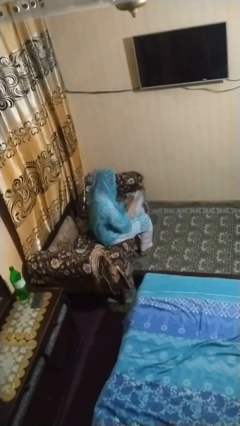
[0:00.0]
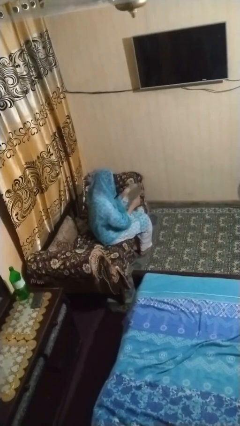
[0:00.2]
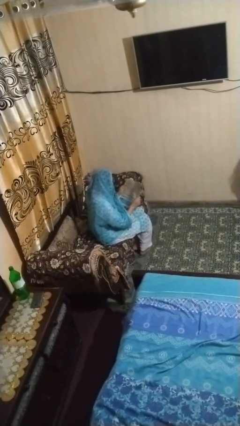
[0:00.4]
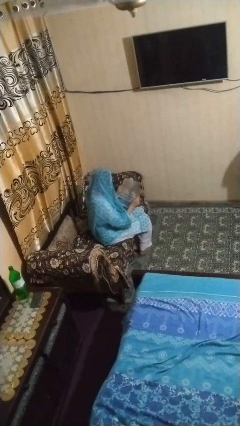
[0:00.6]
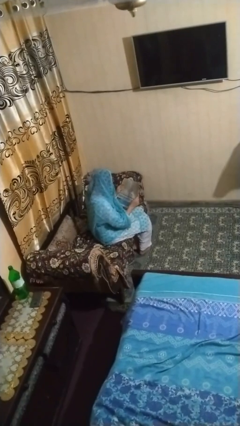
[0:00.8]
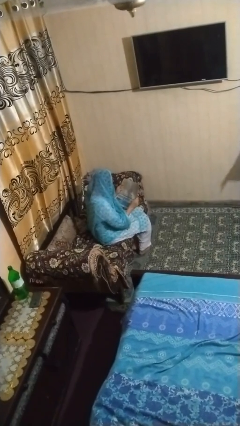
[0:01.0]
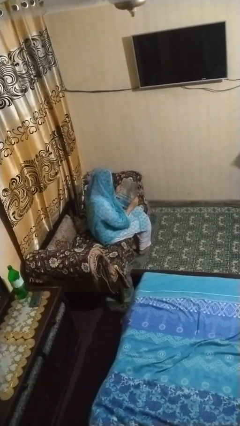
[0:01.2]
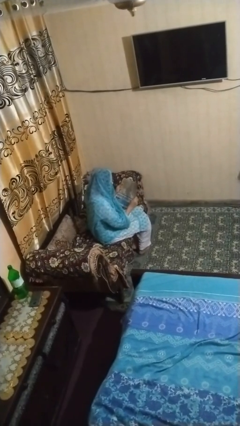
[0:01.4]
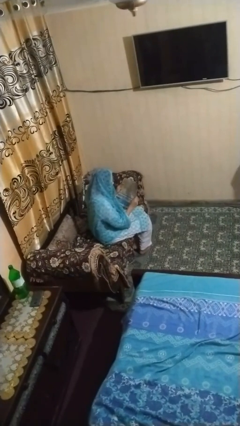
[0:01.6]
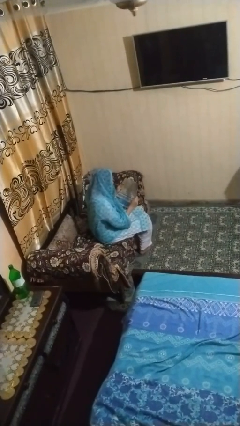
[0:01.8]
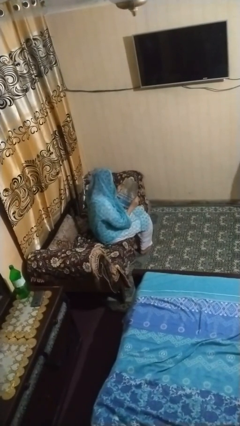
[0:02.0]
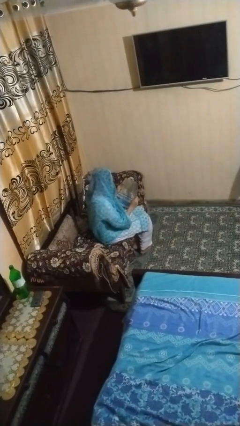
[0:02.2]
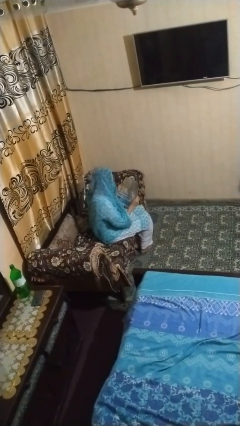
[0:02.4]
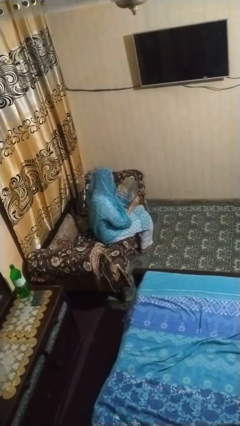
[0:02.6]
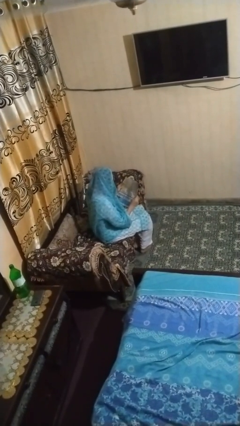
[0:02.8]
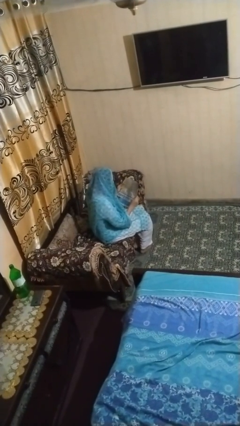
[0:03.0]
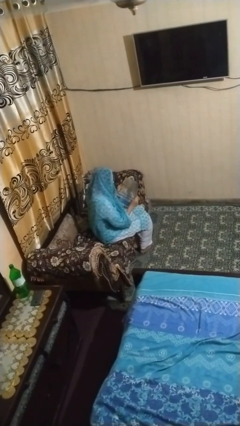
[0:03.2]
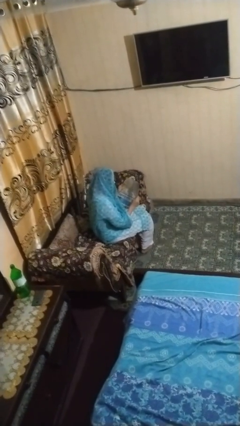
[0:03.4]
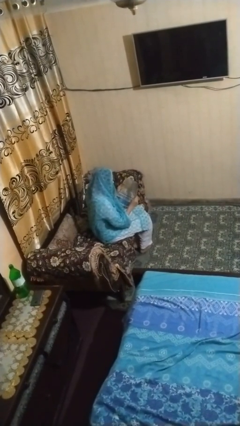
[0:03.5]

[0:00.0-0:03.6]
person reads newspaper

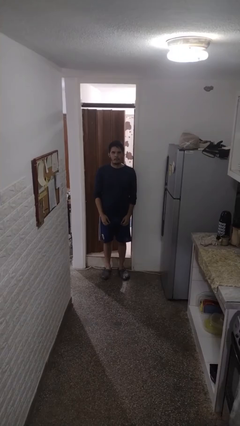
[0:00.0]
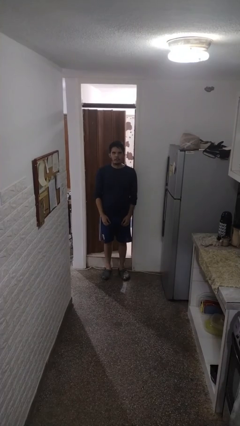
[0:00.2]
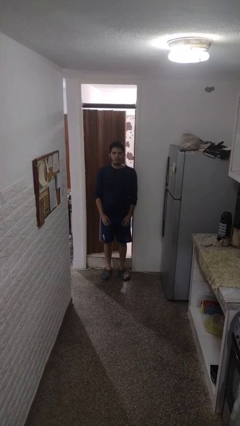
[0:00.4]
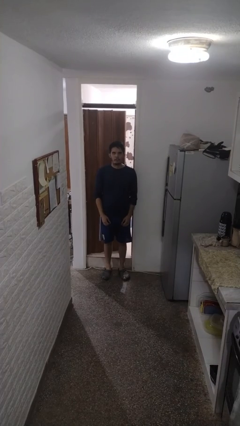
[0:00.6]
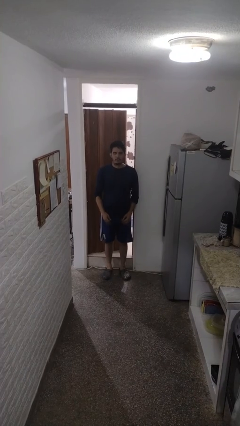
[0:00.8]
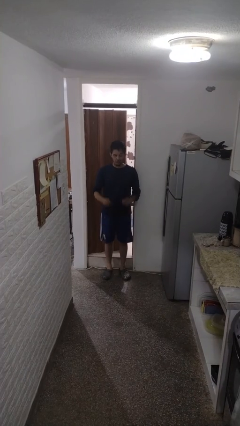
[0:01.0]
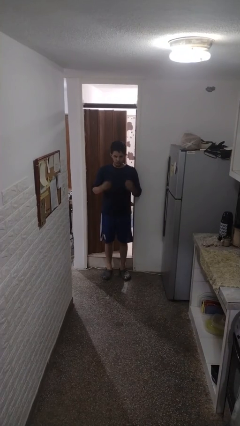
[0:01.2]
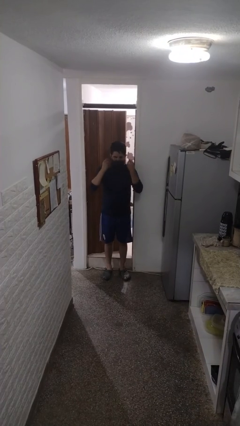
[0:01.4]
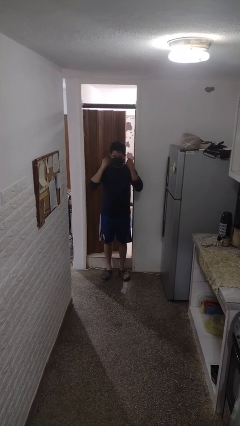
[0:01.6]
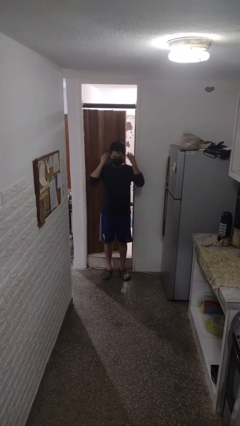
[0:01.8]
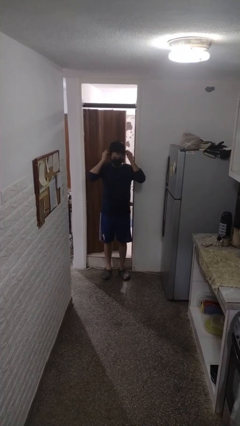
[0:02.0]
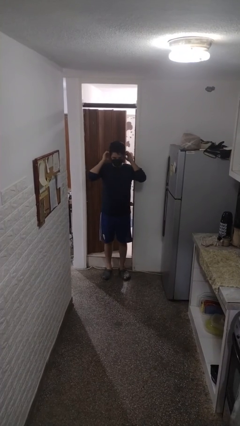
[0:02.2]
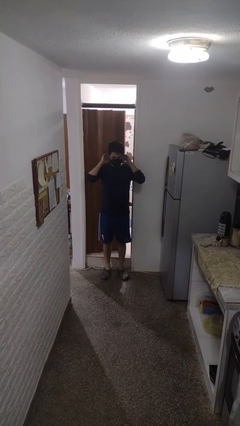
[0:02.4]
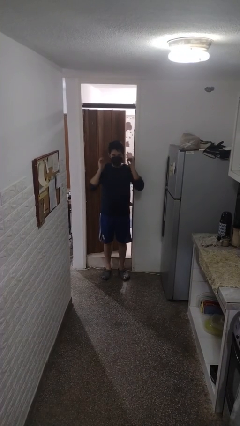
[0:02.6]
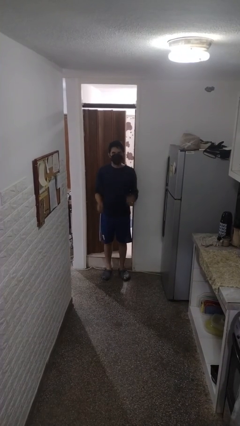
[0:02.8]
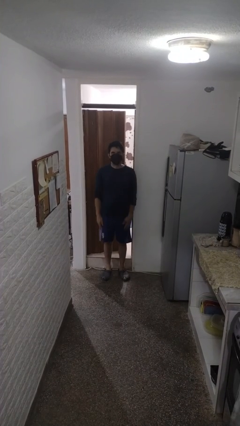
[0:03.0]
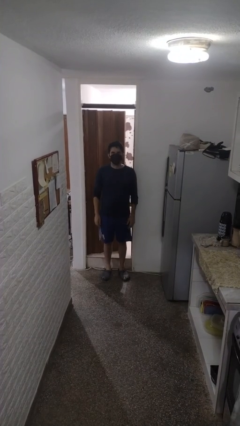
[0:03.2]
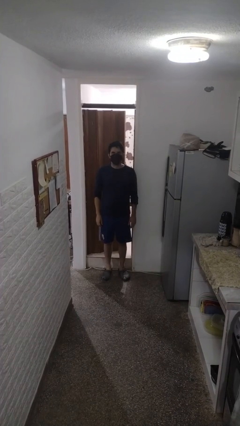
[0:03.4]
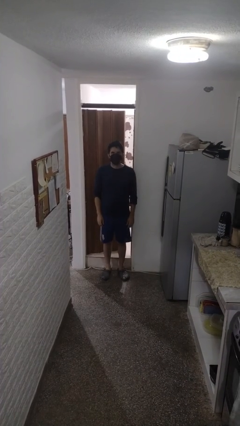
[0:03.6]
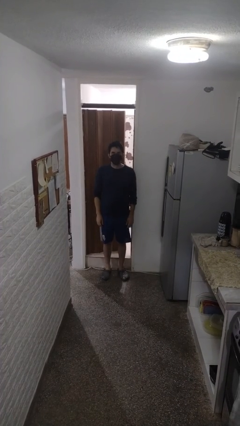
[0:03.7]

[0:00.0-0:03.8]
person puts on facemask

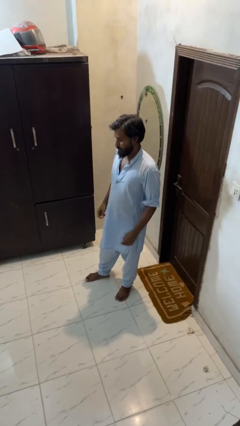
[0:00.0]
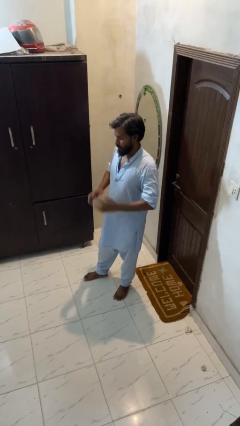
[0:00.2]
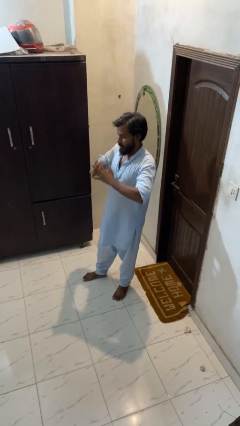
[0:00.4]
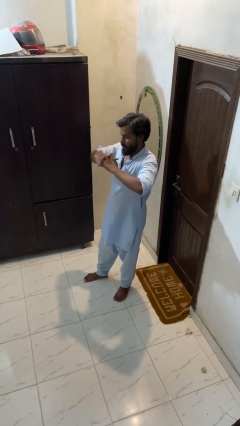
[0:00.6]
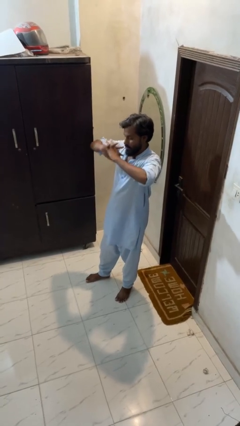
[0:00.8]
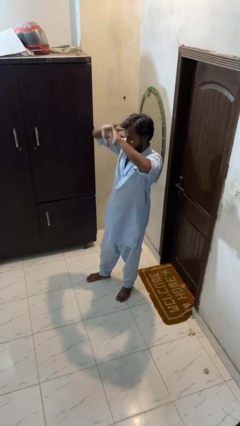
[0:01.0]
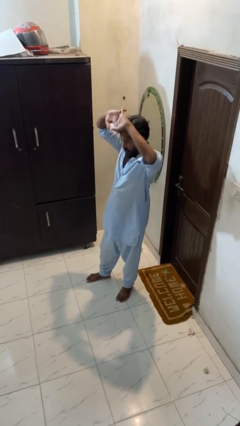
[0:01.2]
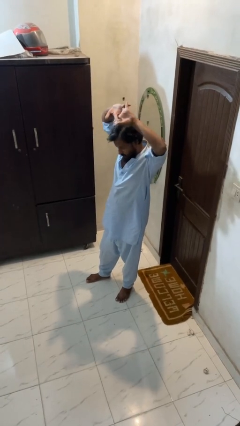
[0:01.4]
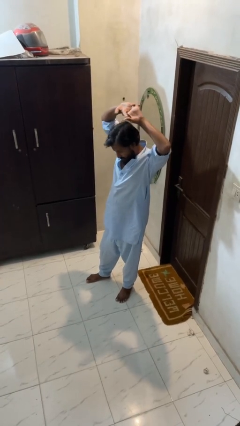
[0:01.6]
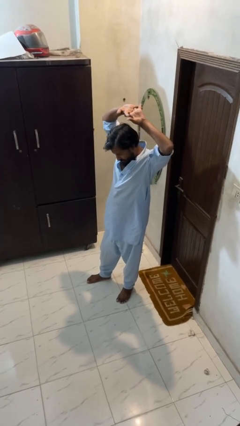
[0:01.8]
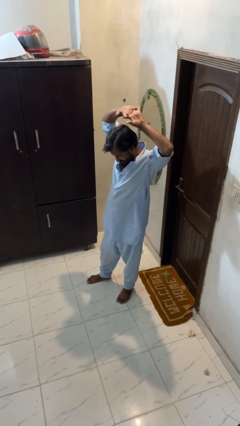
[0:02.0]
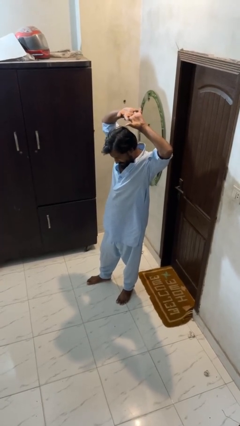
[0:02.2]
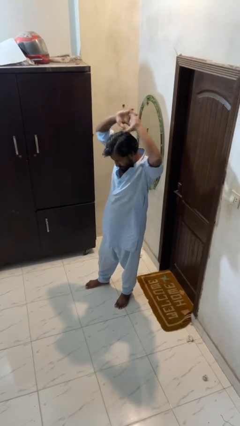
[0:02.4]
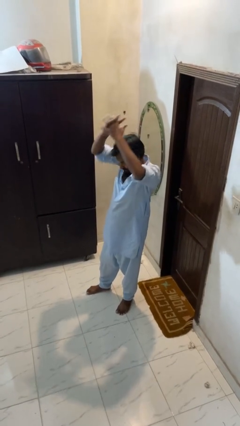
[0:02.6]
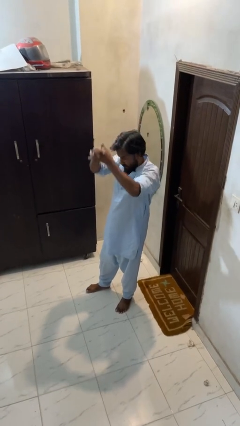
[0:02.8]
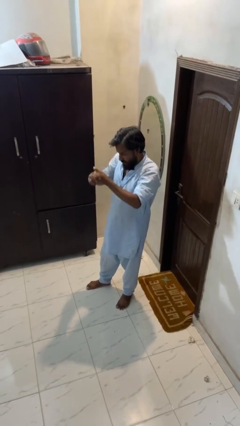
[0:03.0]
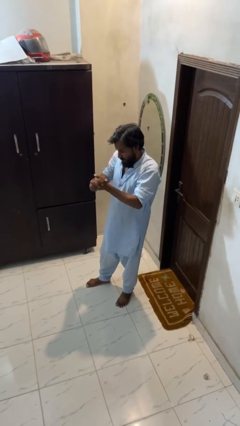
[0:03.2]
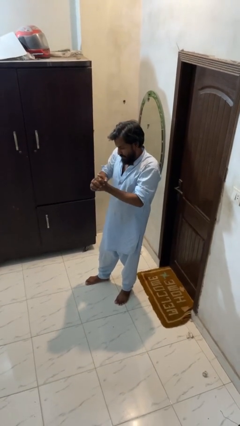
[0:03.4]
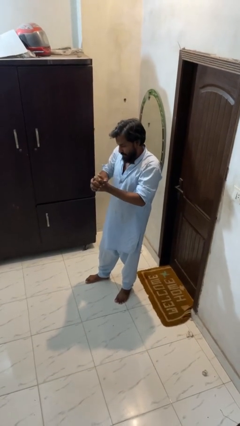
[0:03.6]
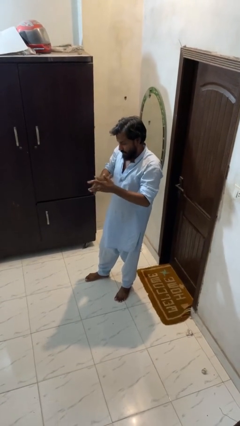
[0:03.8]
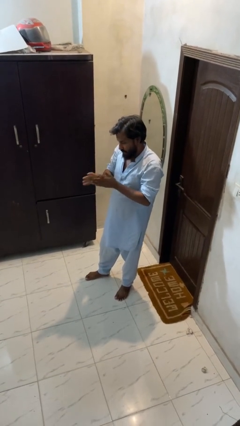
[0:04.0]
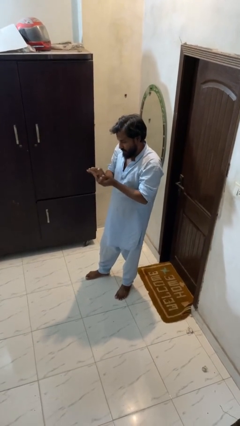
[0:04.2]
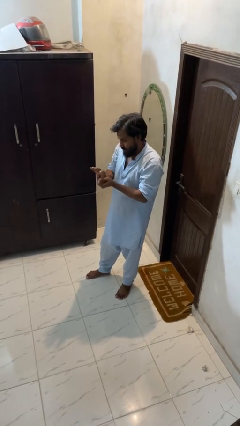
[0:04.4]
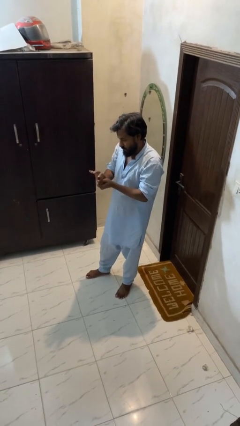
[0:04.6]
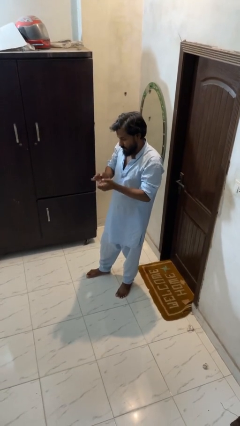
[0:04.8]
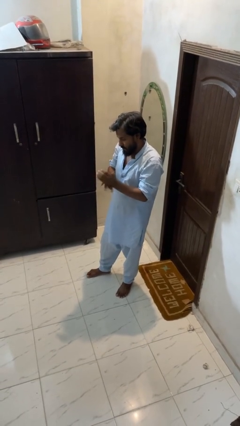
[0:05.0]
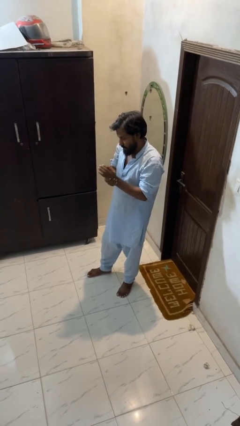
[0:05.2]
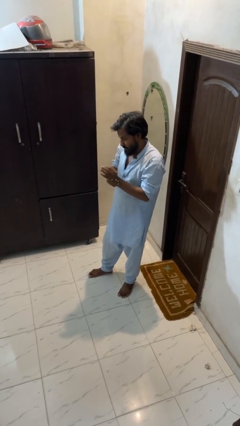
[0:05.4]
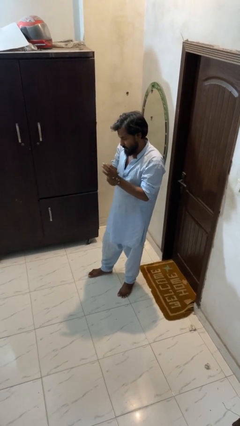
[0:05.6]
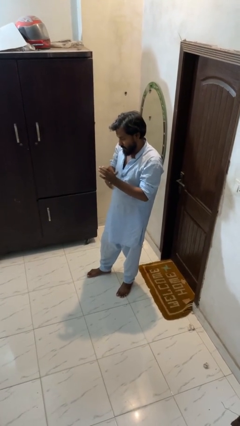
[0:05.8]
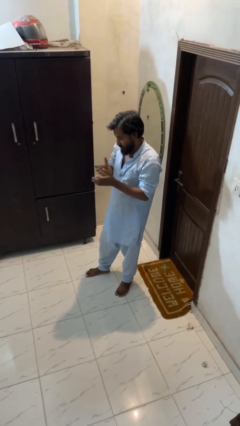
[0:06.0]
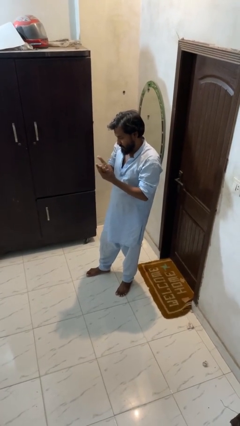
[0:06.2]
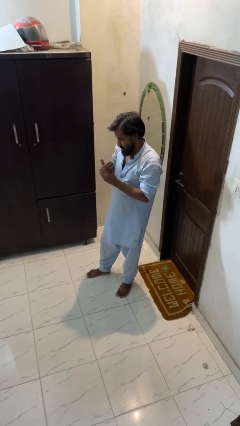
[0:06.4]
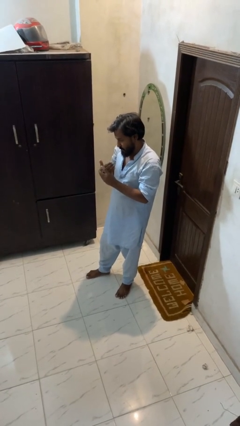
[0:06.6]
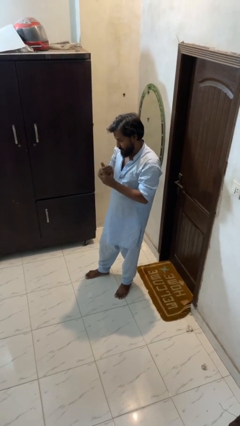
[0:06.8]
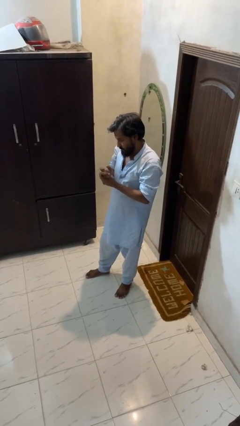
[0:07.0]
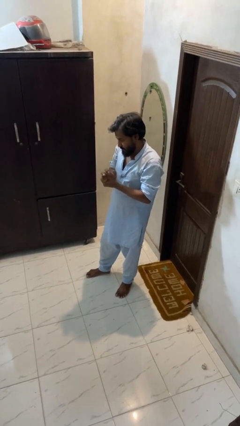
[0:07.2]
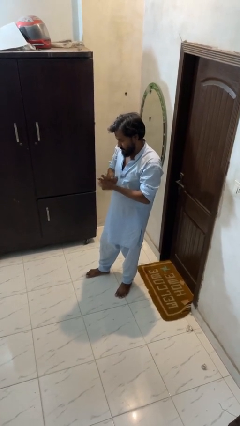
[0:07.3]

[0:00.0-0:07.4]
person cracks knuckles

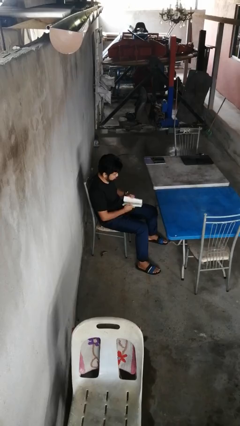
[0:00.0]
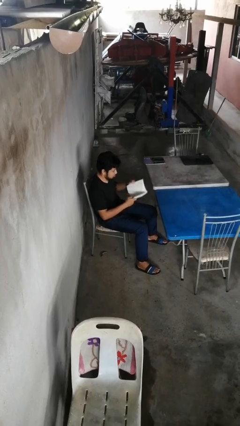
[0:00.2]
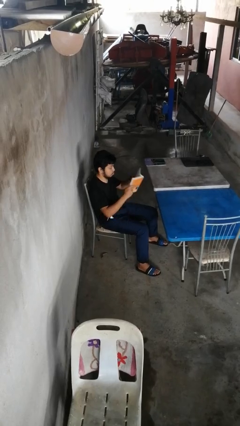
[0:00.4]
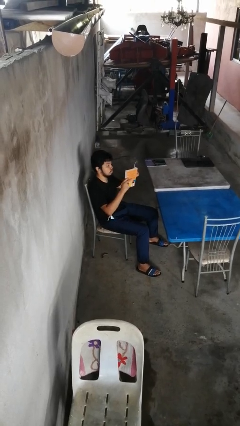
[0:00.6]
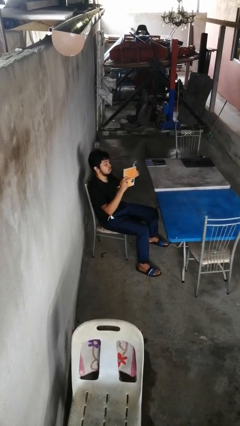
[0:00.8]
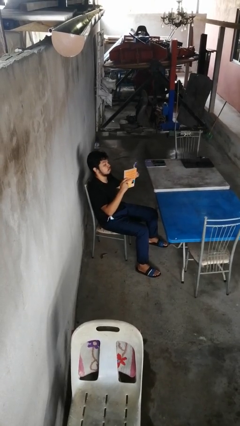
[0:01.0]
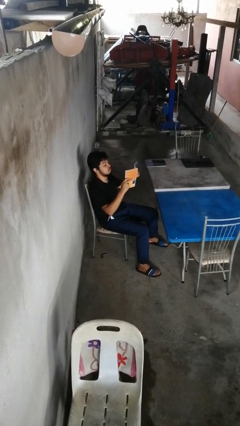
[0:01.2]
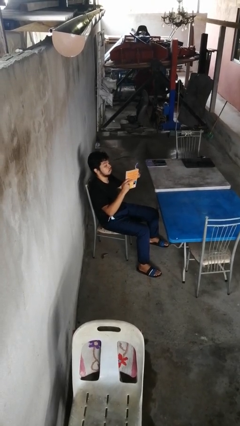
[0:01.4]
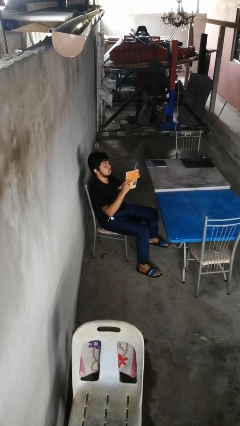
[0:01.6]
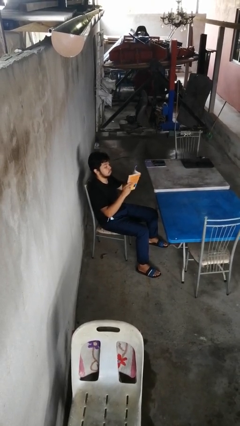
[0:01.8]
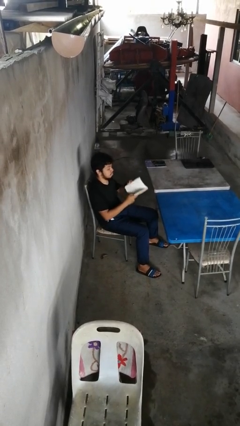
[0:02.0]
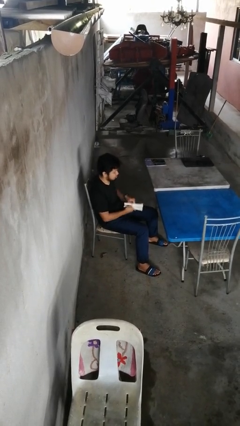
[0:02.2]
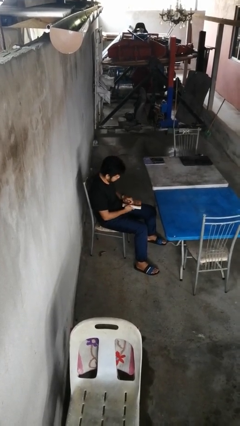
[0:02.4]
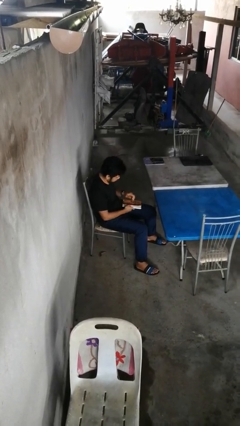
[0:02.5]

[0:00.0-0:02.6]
person reads book

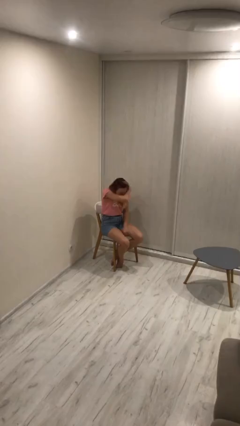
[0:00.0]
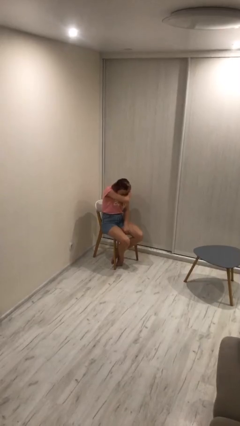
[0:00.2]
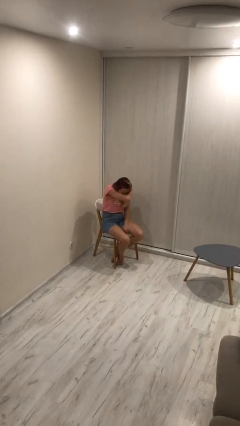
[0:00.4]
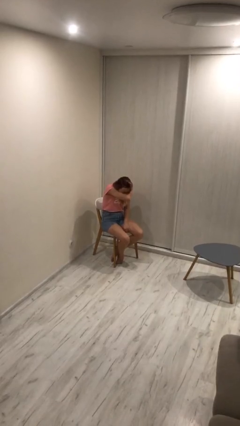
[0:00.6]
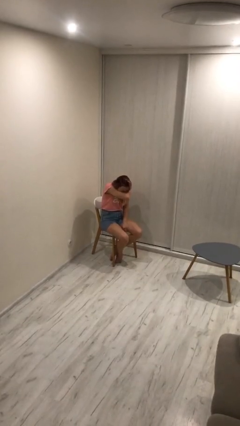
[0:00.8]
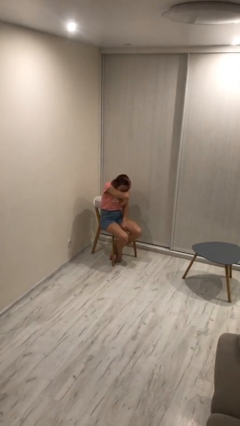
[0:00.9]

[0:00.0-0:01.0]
person sneezes into arm
